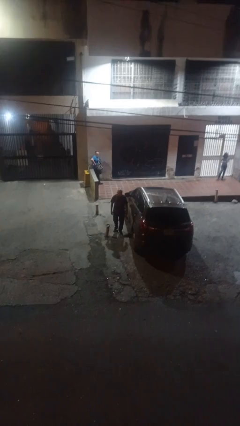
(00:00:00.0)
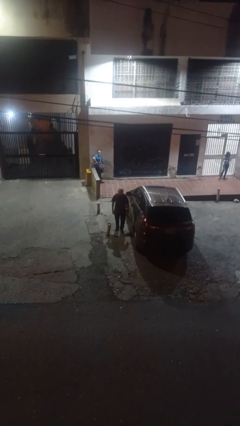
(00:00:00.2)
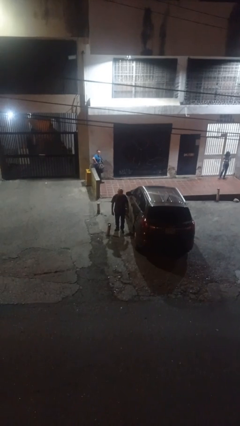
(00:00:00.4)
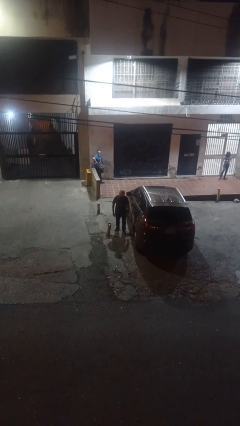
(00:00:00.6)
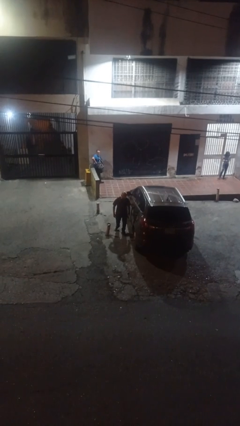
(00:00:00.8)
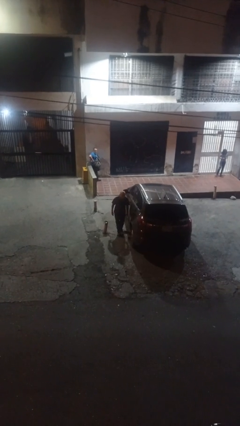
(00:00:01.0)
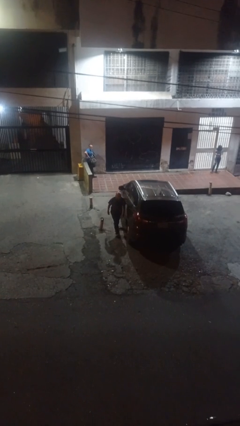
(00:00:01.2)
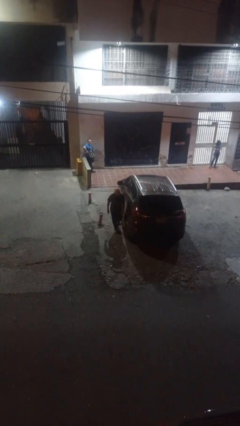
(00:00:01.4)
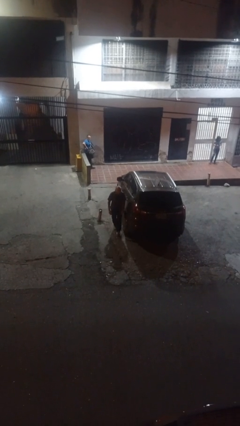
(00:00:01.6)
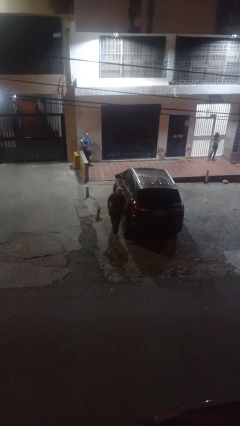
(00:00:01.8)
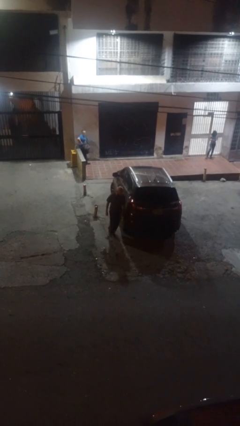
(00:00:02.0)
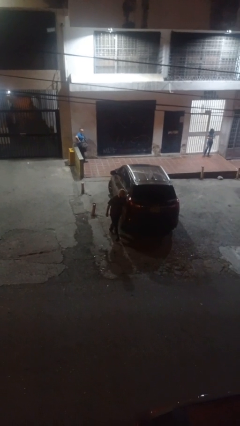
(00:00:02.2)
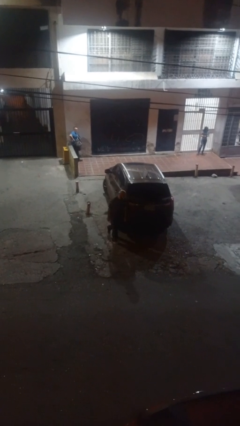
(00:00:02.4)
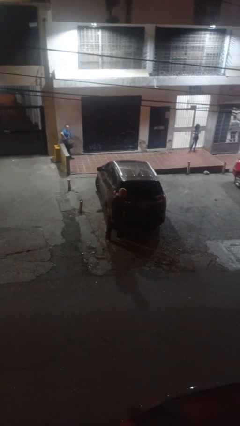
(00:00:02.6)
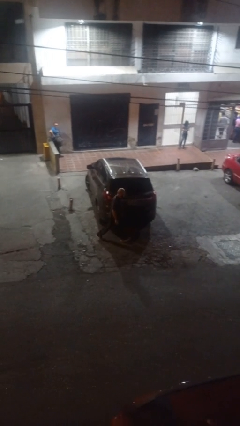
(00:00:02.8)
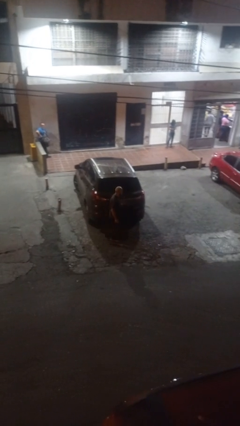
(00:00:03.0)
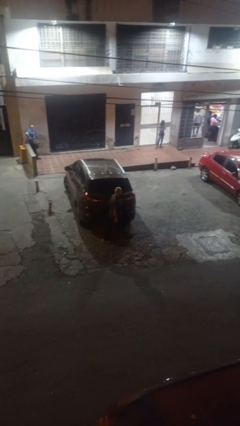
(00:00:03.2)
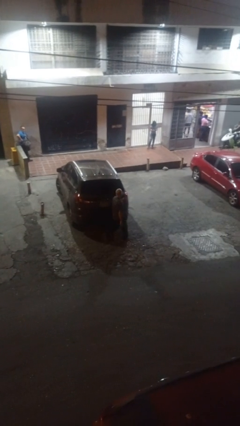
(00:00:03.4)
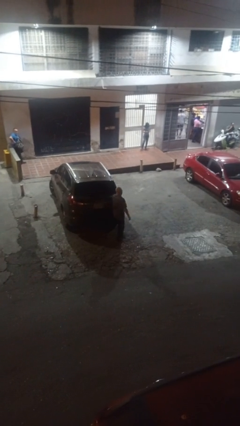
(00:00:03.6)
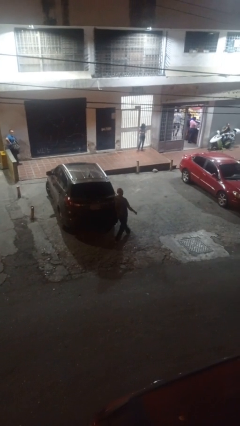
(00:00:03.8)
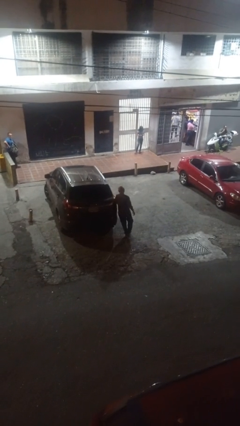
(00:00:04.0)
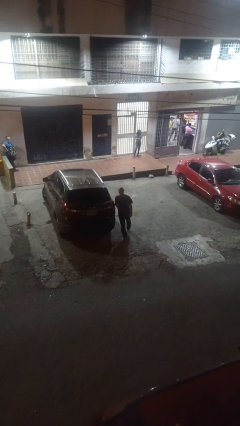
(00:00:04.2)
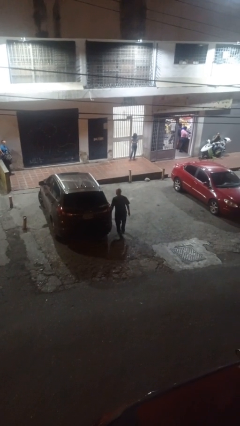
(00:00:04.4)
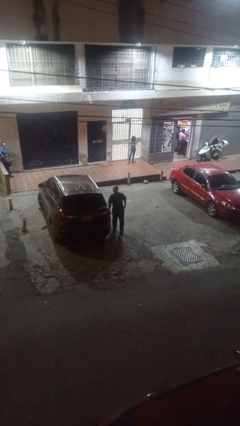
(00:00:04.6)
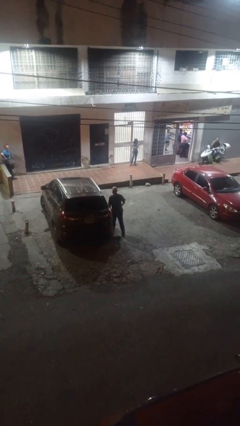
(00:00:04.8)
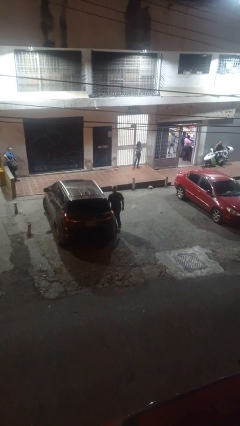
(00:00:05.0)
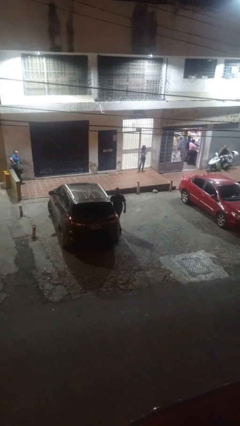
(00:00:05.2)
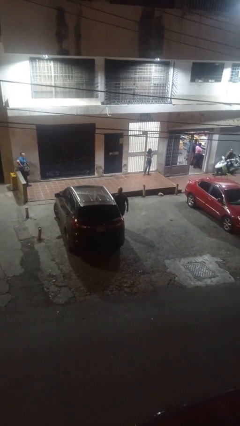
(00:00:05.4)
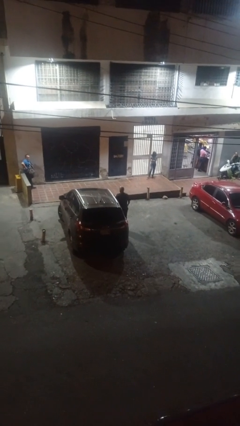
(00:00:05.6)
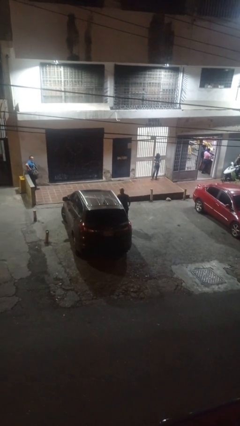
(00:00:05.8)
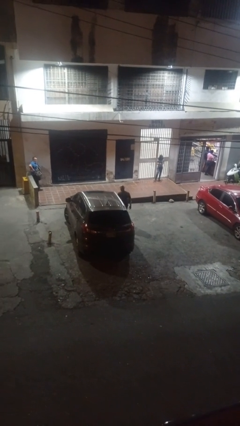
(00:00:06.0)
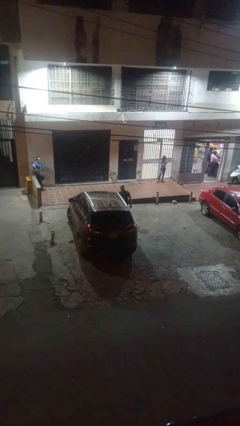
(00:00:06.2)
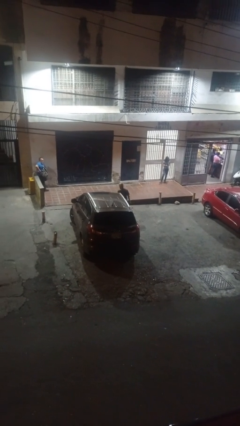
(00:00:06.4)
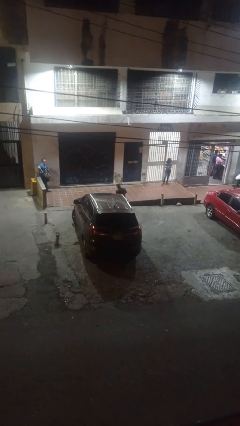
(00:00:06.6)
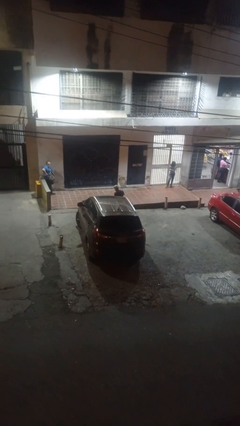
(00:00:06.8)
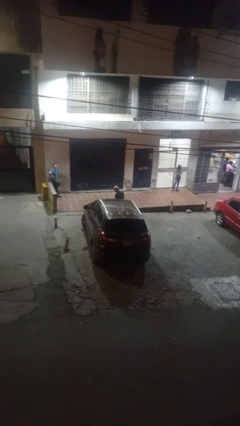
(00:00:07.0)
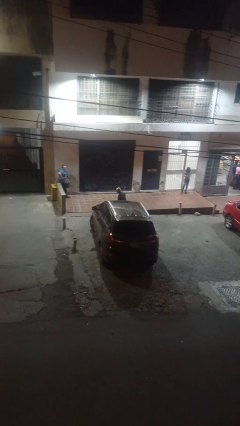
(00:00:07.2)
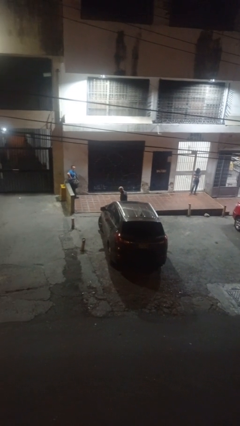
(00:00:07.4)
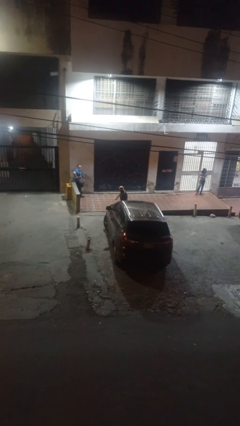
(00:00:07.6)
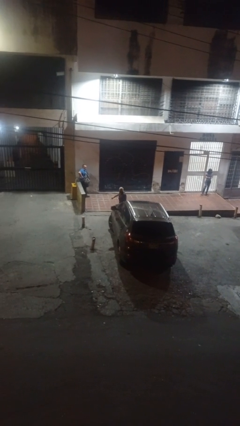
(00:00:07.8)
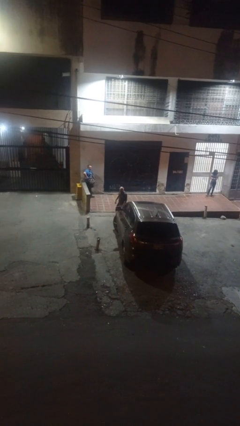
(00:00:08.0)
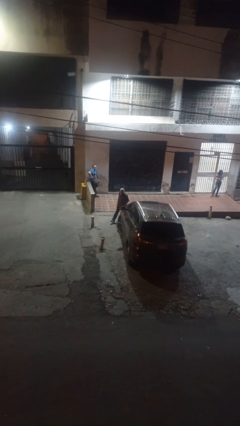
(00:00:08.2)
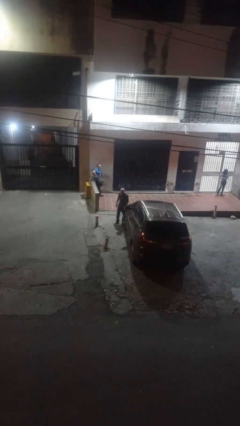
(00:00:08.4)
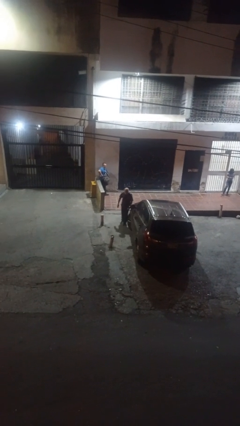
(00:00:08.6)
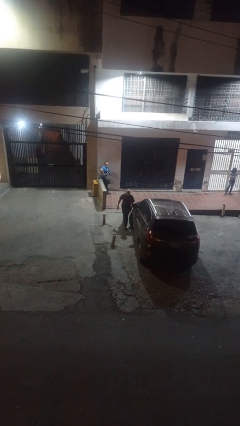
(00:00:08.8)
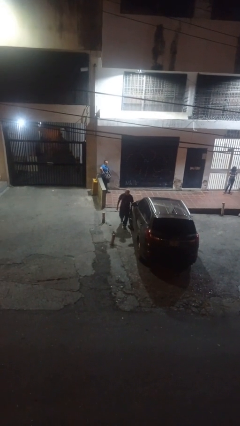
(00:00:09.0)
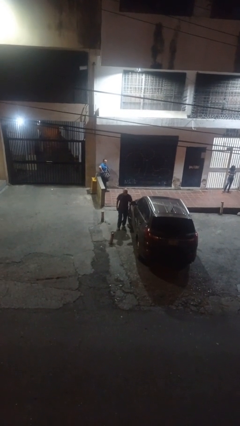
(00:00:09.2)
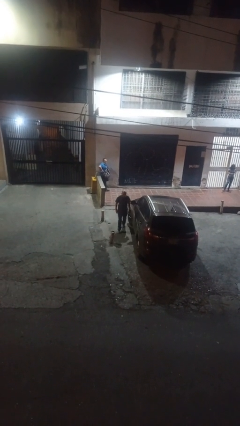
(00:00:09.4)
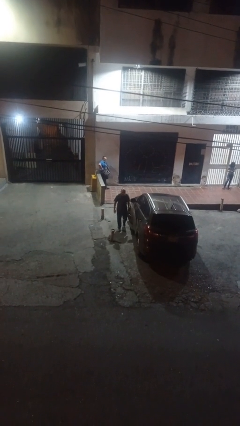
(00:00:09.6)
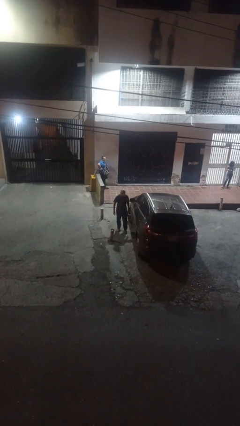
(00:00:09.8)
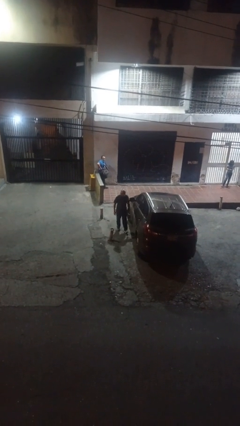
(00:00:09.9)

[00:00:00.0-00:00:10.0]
person walks around car

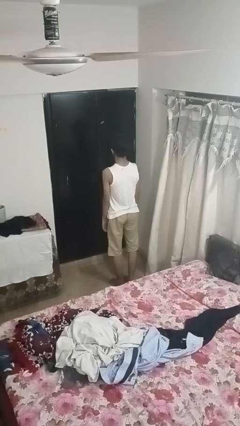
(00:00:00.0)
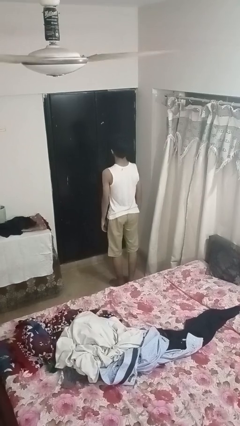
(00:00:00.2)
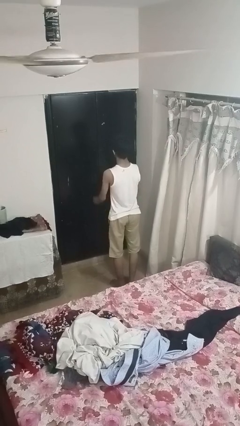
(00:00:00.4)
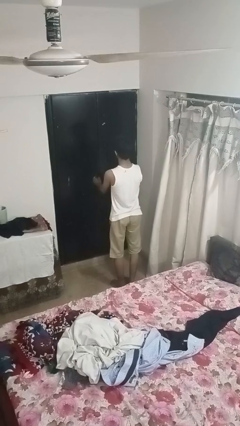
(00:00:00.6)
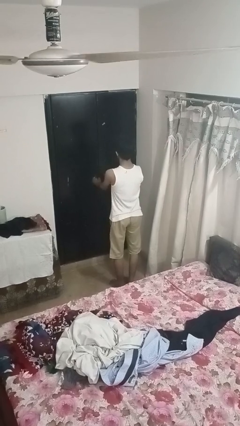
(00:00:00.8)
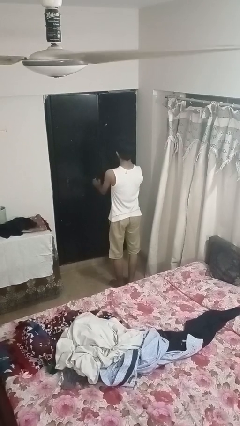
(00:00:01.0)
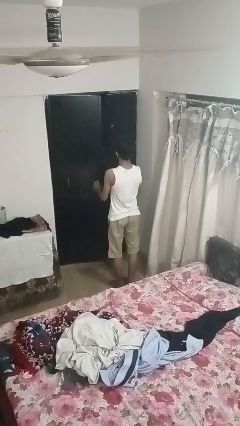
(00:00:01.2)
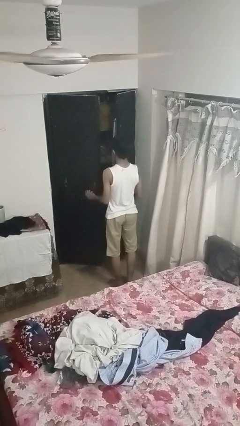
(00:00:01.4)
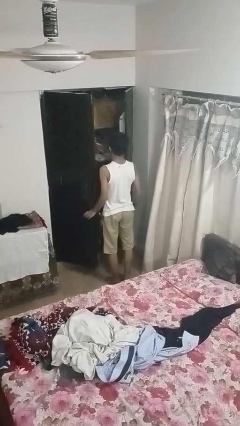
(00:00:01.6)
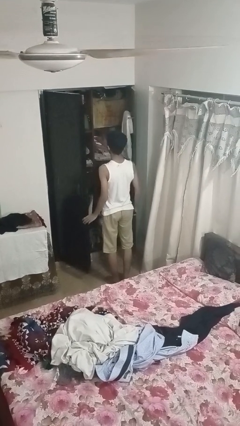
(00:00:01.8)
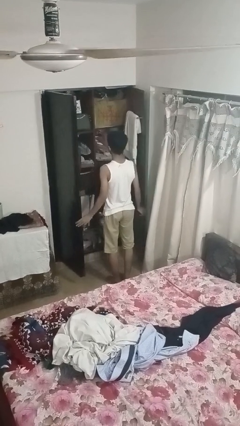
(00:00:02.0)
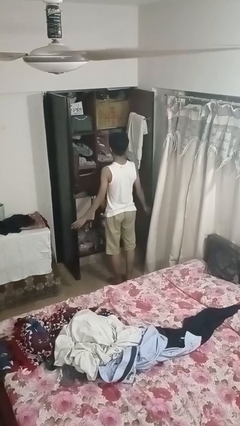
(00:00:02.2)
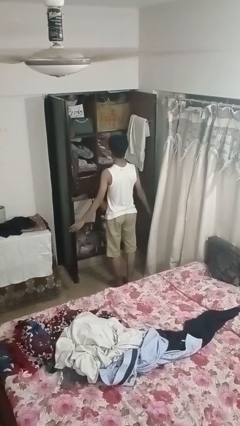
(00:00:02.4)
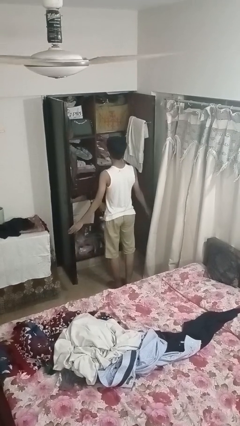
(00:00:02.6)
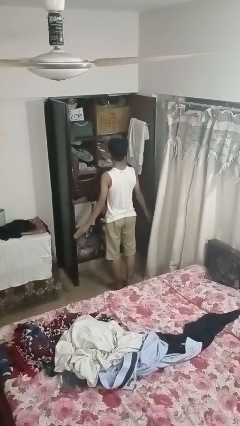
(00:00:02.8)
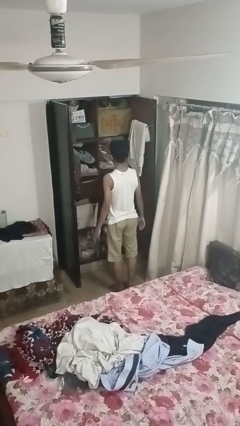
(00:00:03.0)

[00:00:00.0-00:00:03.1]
person opens closet door

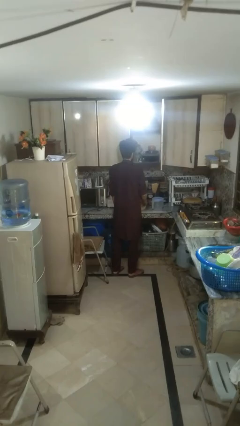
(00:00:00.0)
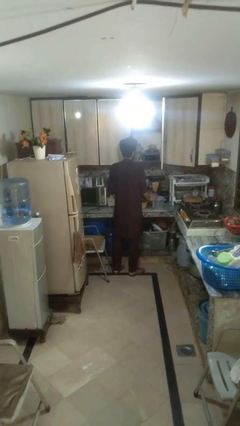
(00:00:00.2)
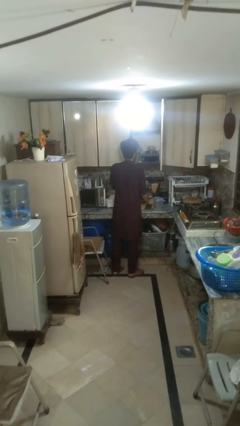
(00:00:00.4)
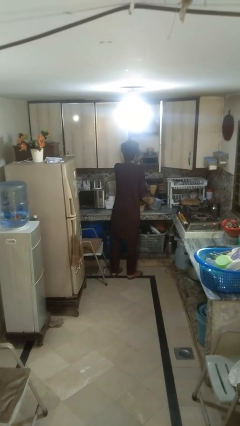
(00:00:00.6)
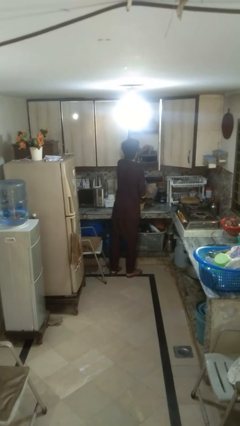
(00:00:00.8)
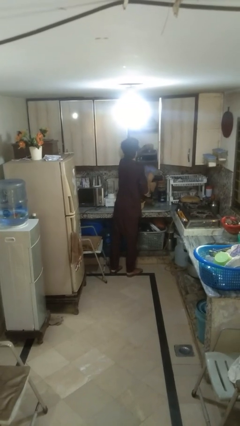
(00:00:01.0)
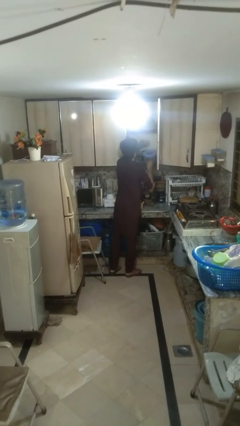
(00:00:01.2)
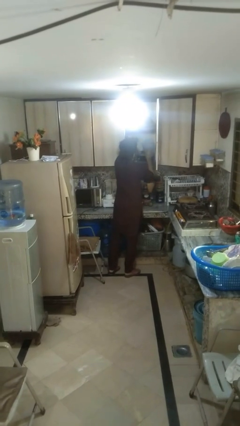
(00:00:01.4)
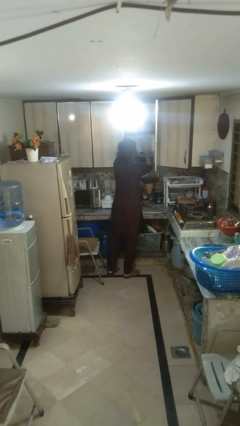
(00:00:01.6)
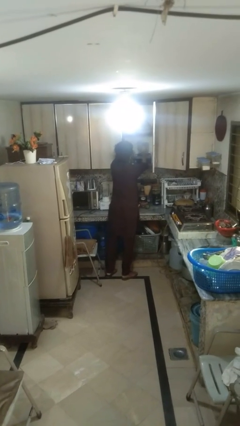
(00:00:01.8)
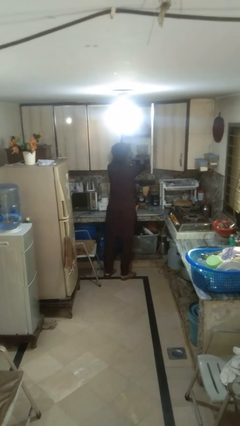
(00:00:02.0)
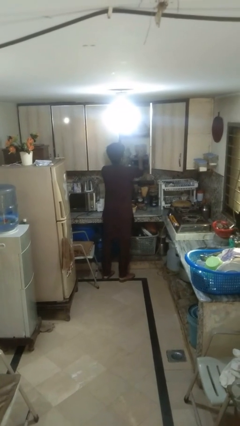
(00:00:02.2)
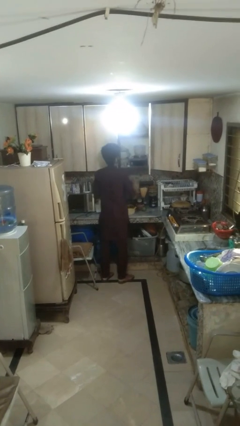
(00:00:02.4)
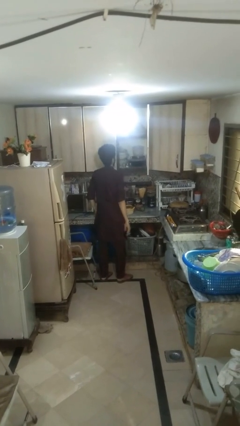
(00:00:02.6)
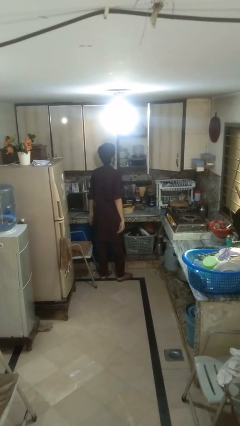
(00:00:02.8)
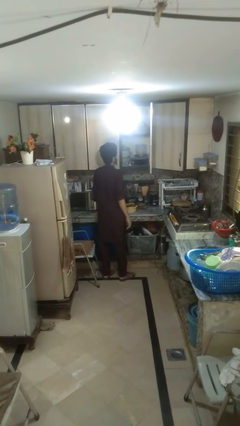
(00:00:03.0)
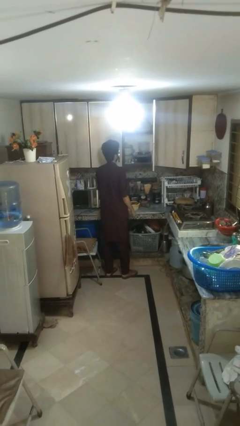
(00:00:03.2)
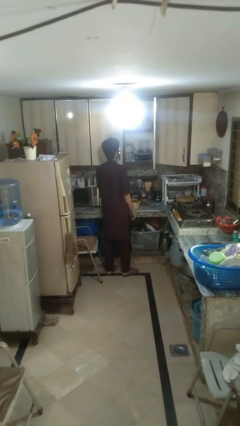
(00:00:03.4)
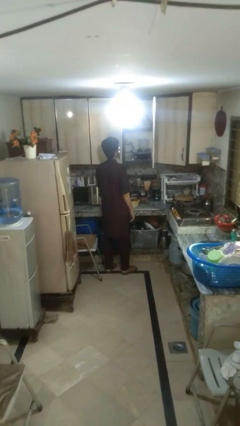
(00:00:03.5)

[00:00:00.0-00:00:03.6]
person puts object in cabinet

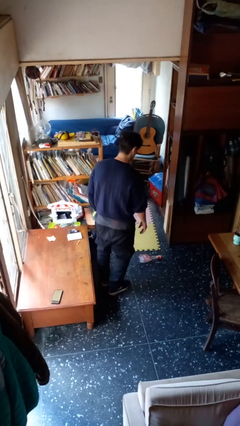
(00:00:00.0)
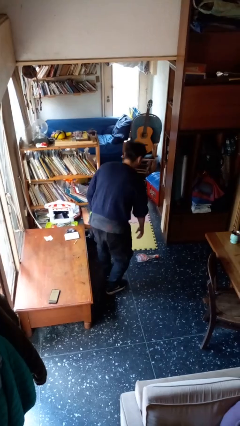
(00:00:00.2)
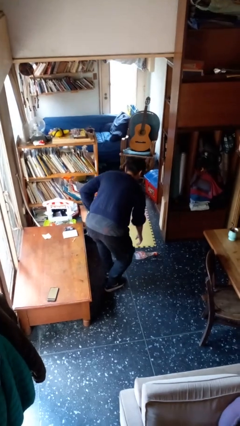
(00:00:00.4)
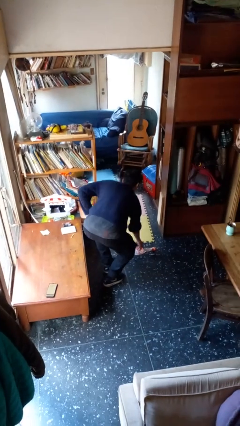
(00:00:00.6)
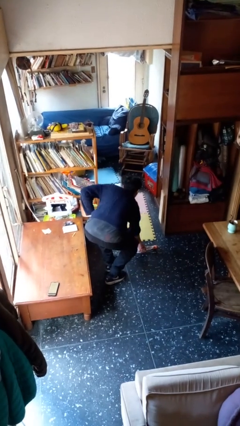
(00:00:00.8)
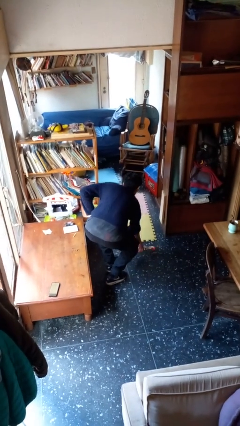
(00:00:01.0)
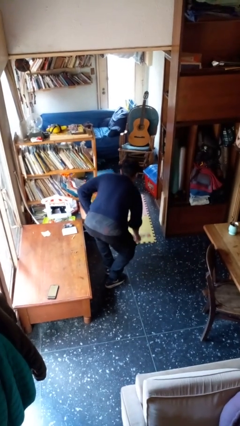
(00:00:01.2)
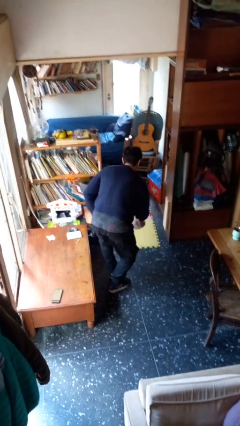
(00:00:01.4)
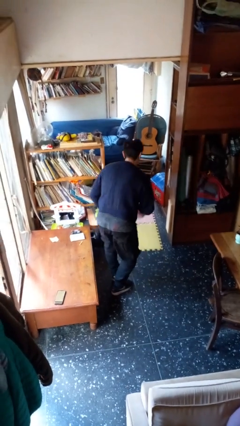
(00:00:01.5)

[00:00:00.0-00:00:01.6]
person picks up object from floor
